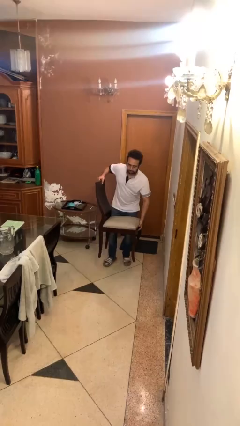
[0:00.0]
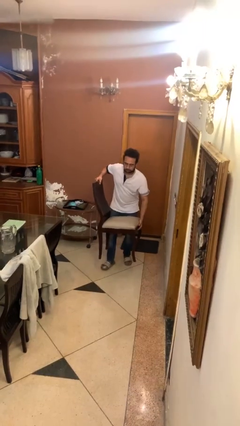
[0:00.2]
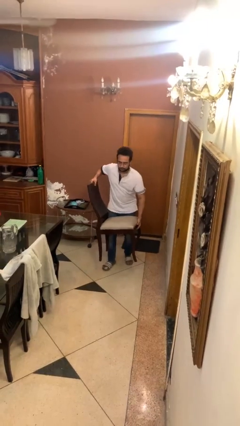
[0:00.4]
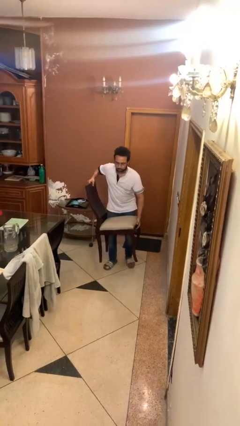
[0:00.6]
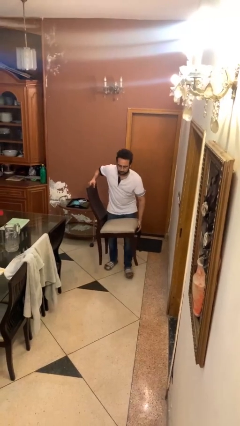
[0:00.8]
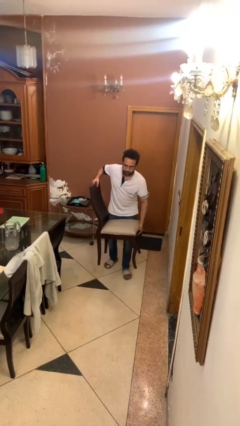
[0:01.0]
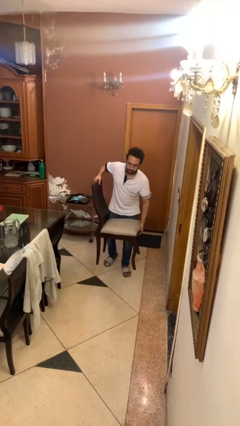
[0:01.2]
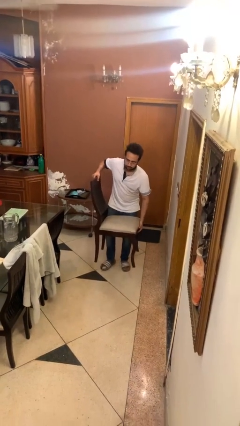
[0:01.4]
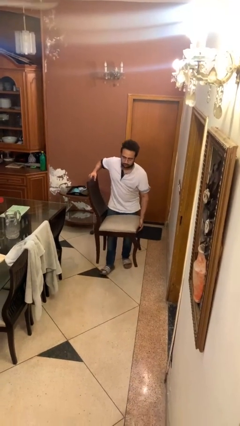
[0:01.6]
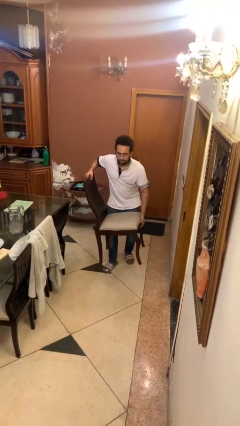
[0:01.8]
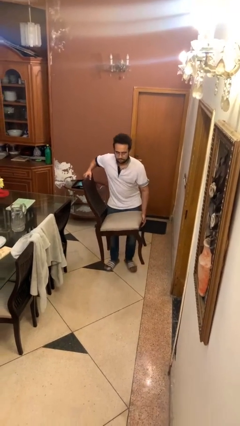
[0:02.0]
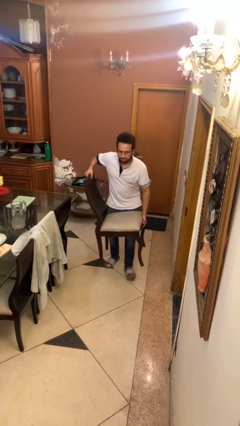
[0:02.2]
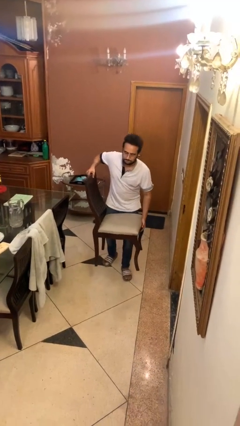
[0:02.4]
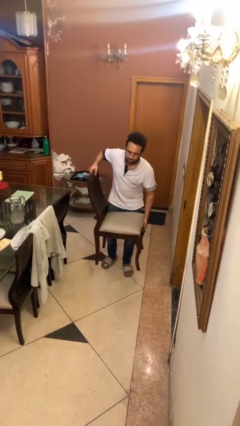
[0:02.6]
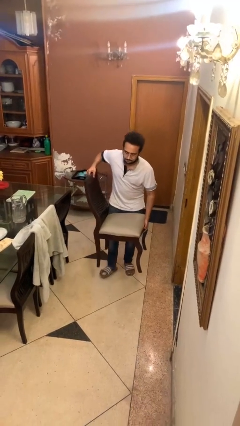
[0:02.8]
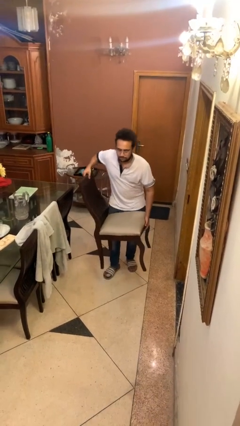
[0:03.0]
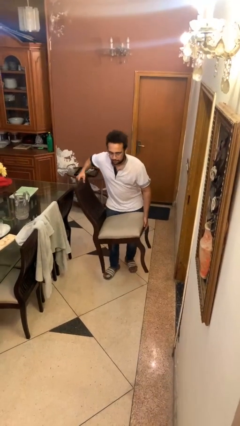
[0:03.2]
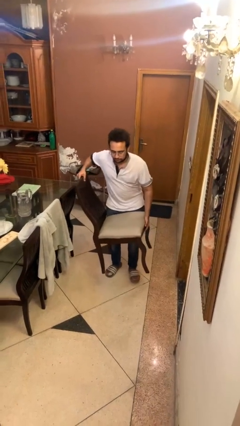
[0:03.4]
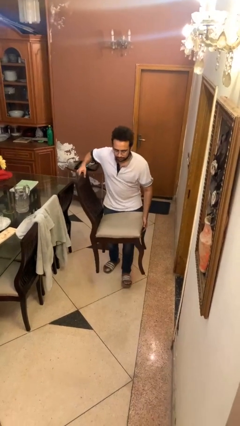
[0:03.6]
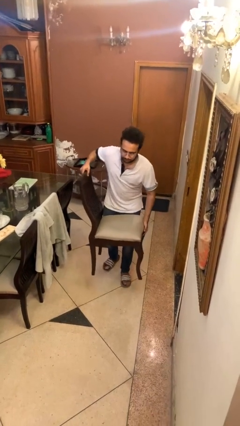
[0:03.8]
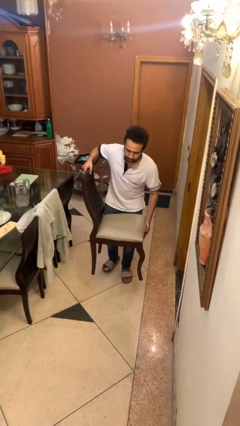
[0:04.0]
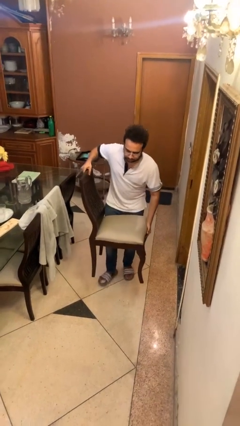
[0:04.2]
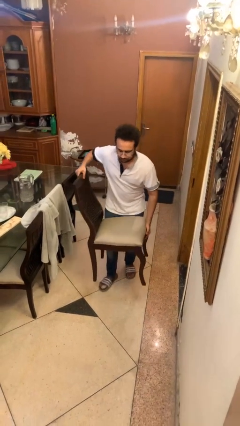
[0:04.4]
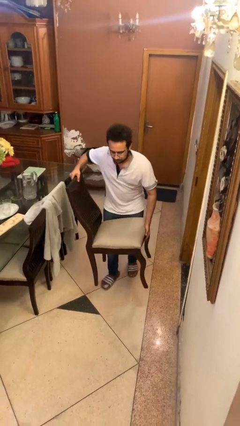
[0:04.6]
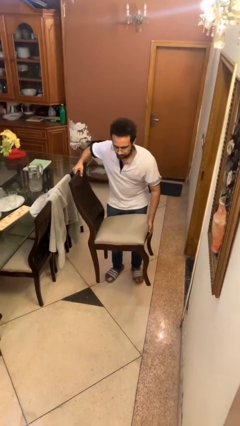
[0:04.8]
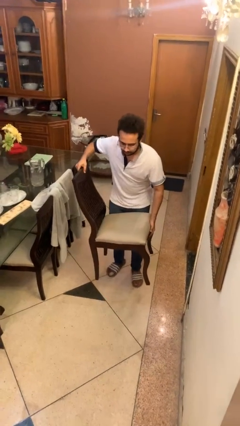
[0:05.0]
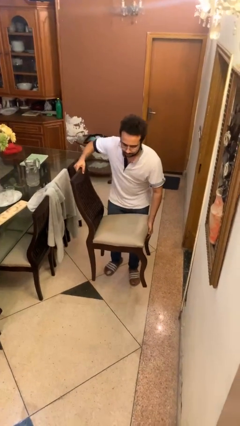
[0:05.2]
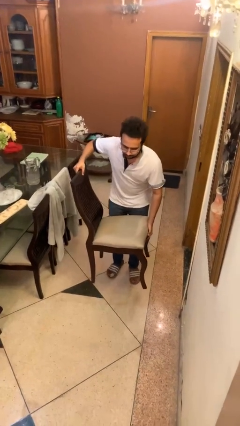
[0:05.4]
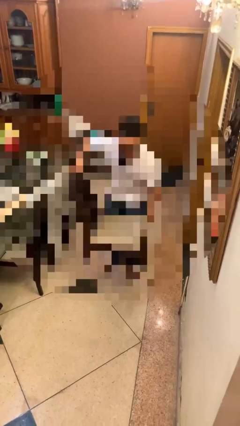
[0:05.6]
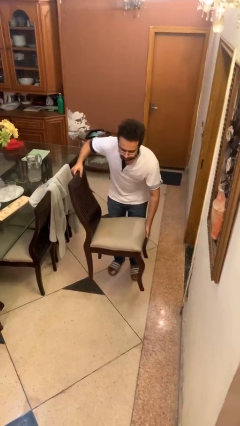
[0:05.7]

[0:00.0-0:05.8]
person carries heavy object

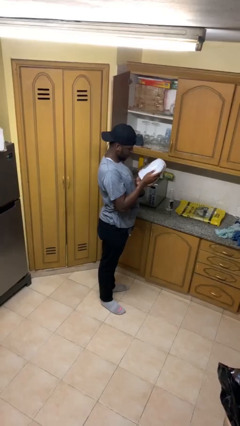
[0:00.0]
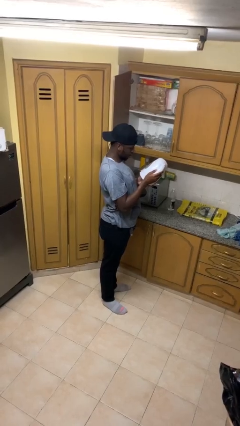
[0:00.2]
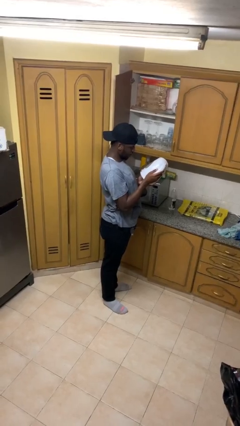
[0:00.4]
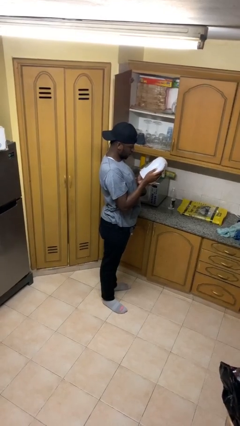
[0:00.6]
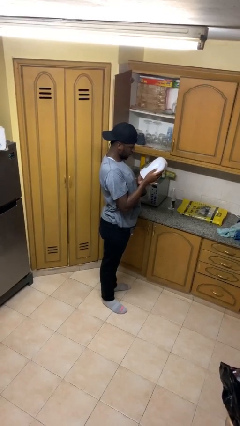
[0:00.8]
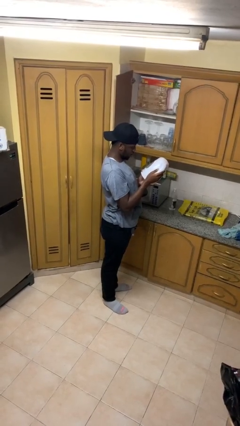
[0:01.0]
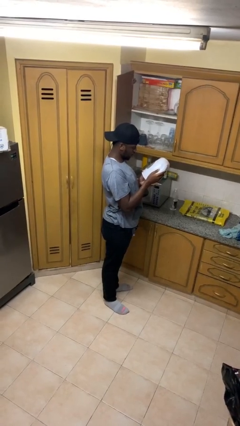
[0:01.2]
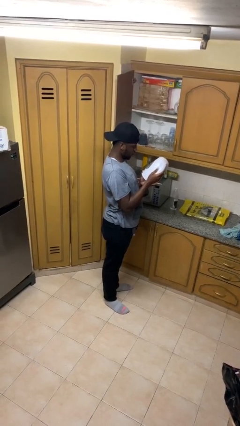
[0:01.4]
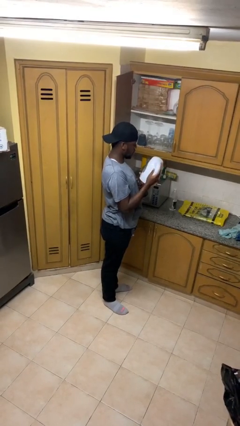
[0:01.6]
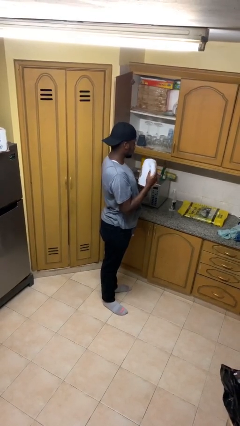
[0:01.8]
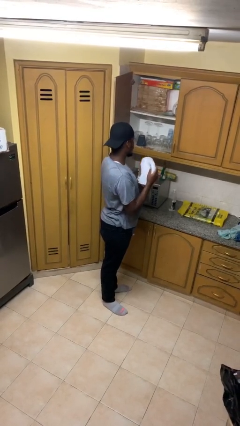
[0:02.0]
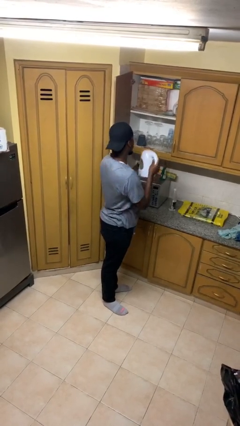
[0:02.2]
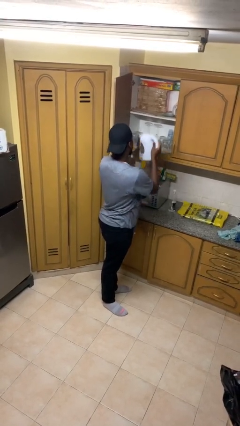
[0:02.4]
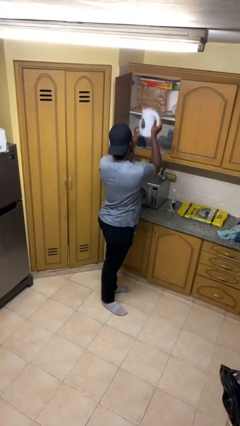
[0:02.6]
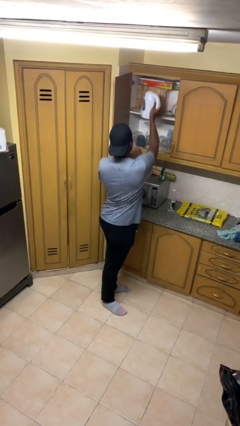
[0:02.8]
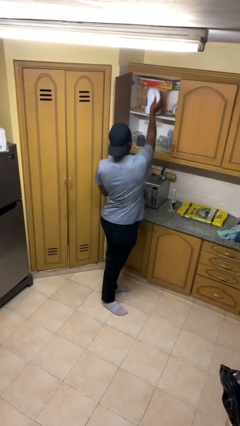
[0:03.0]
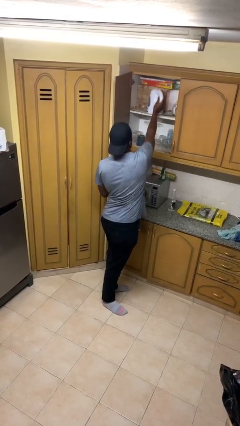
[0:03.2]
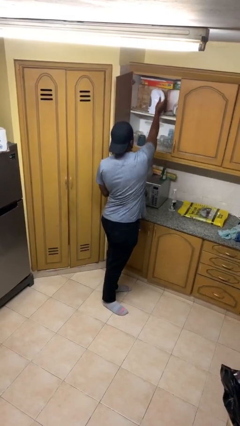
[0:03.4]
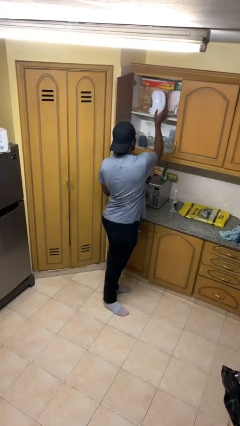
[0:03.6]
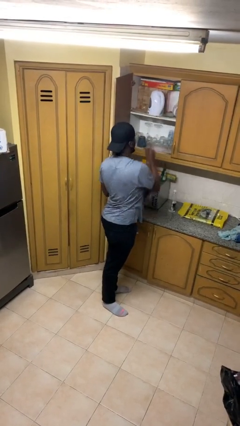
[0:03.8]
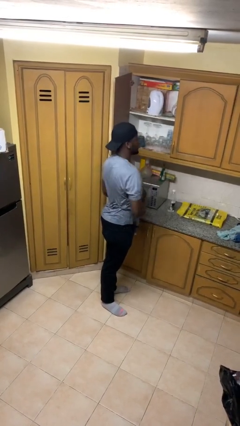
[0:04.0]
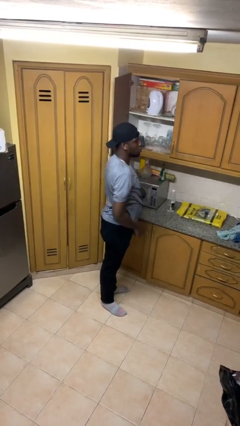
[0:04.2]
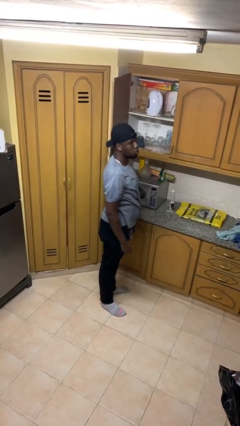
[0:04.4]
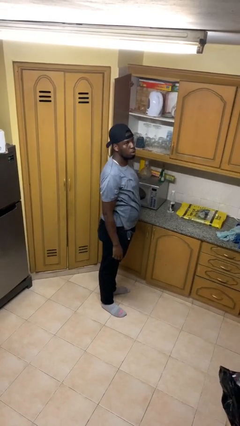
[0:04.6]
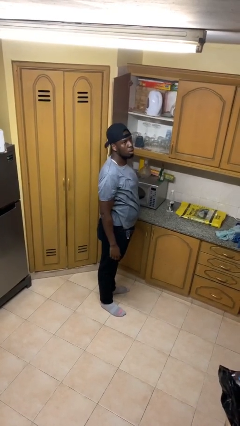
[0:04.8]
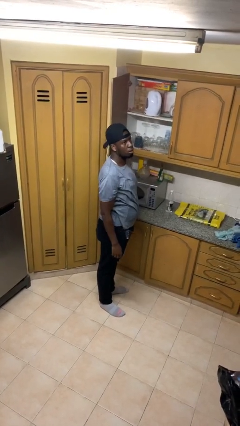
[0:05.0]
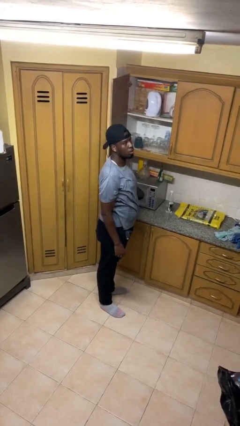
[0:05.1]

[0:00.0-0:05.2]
person puts down object on shelf

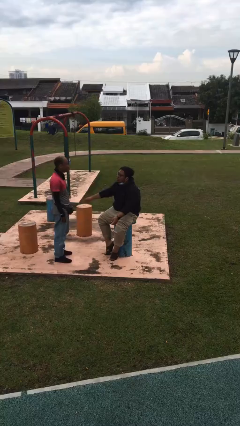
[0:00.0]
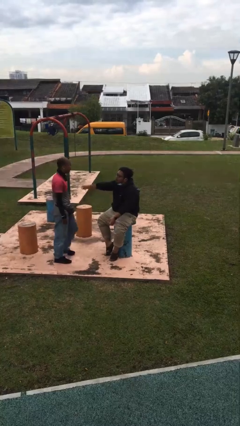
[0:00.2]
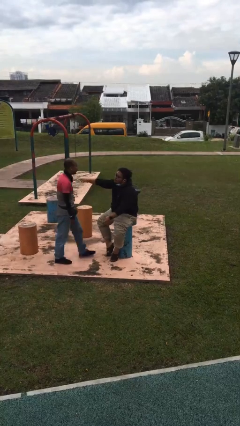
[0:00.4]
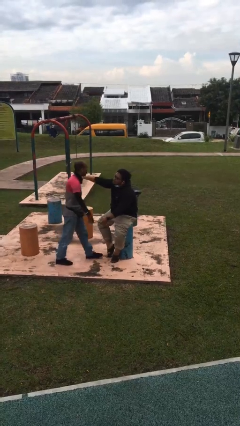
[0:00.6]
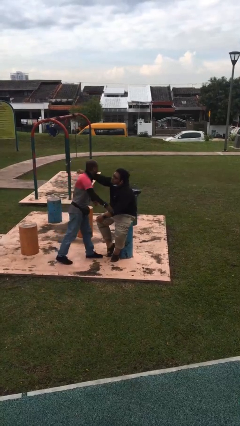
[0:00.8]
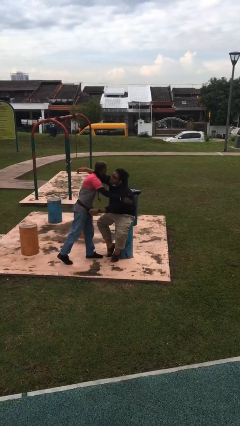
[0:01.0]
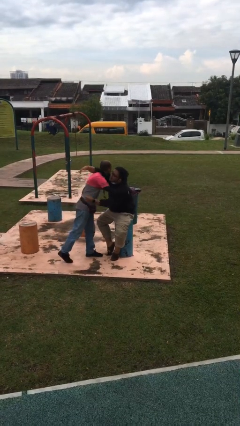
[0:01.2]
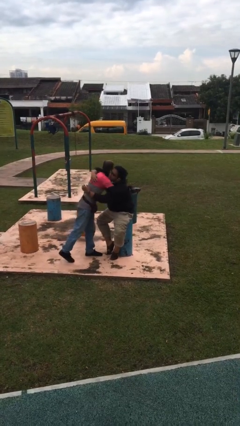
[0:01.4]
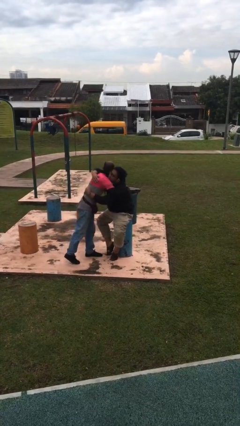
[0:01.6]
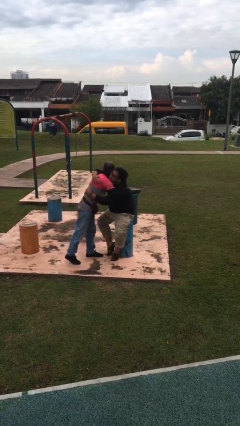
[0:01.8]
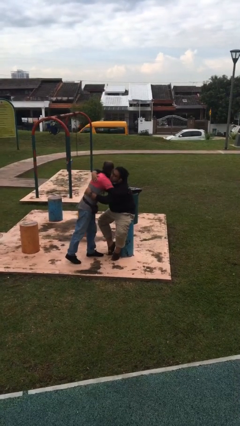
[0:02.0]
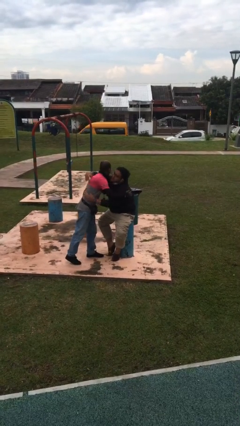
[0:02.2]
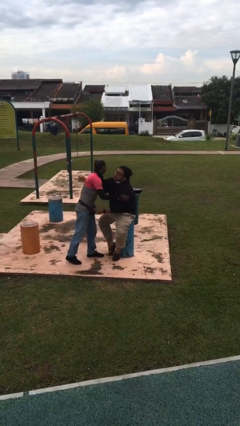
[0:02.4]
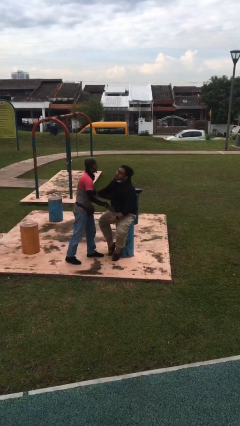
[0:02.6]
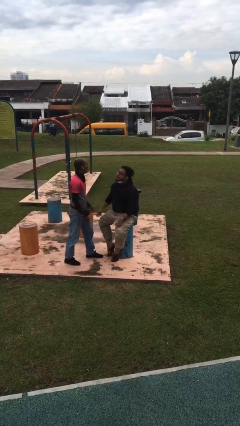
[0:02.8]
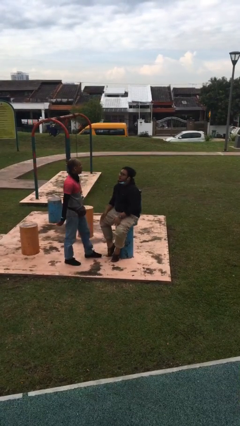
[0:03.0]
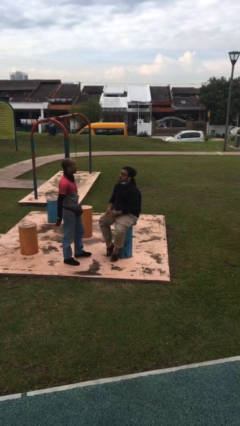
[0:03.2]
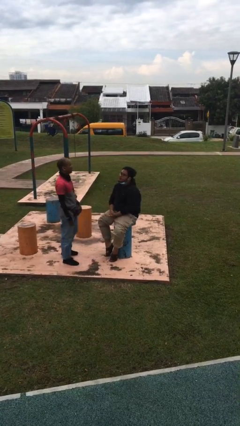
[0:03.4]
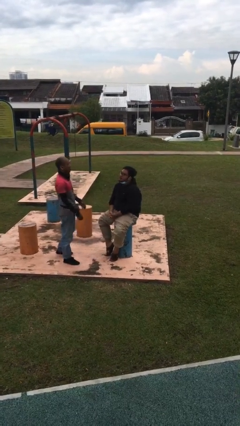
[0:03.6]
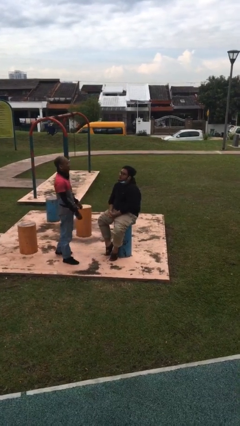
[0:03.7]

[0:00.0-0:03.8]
person embraces person

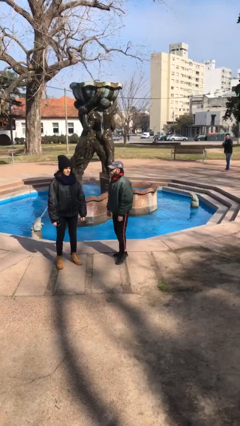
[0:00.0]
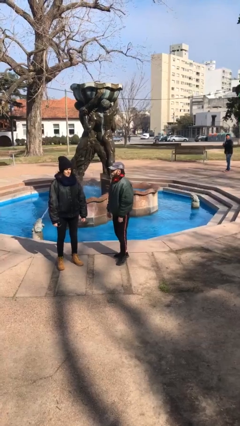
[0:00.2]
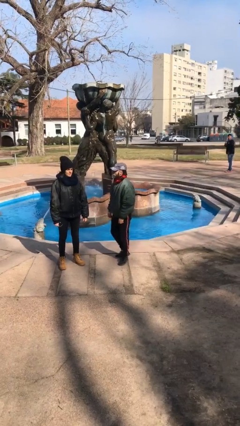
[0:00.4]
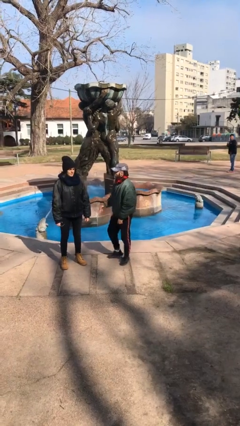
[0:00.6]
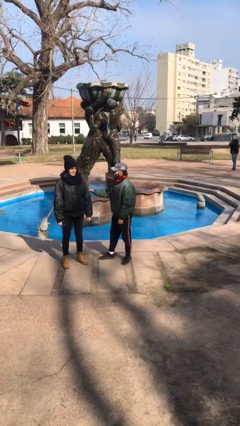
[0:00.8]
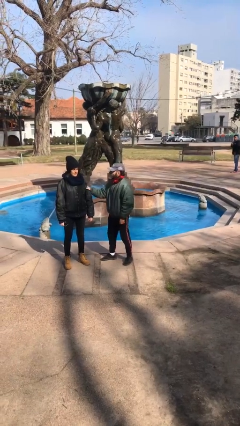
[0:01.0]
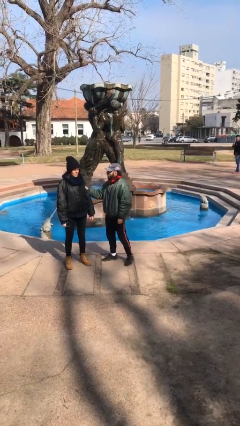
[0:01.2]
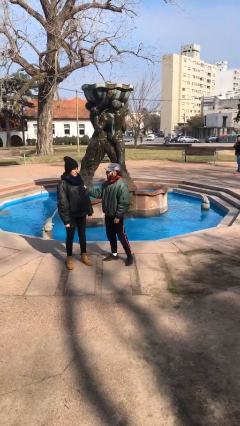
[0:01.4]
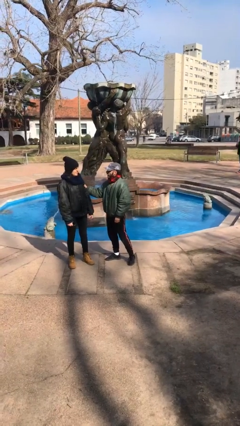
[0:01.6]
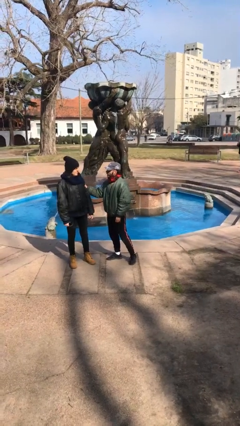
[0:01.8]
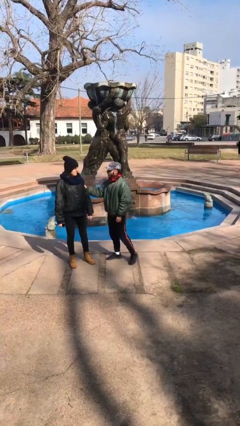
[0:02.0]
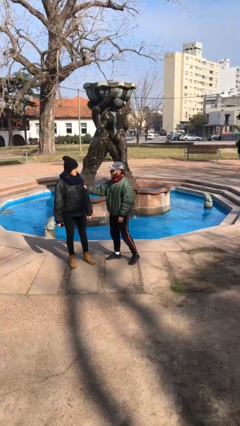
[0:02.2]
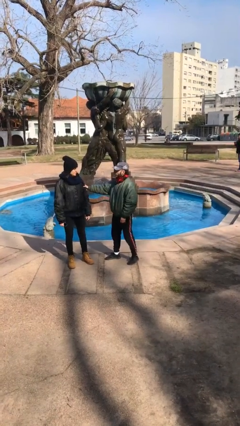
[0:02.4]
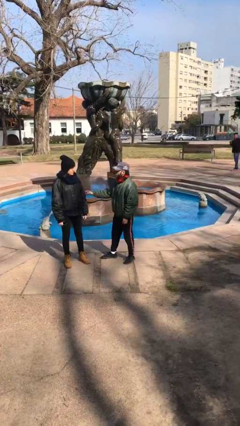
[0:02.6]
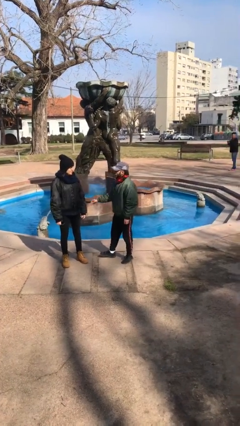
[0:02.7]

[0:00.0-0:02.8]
person grabs person by bicep

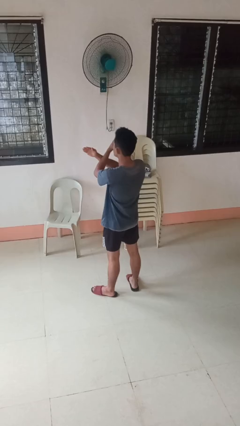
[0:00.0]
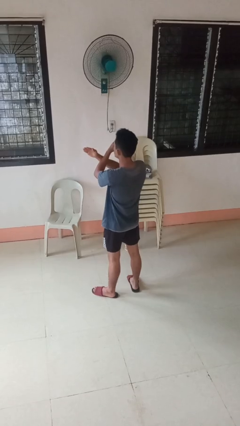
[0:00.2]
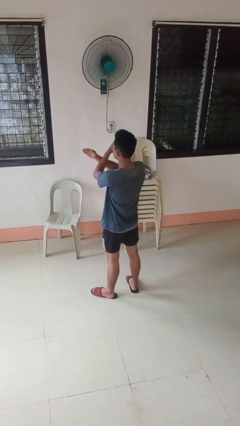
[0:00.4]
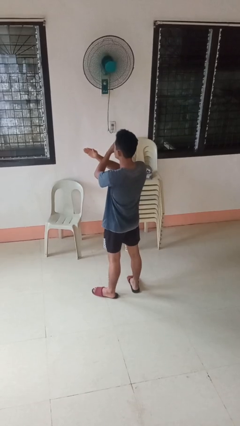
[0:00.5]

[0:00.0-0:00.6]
person gestures arms x
